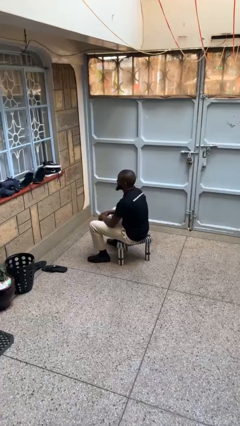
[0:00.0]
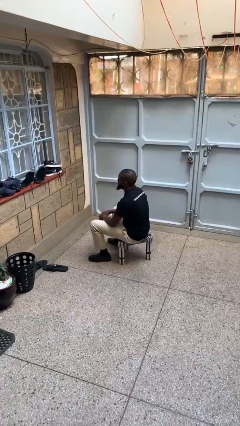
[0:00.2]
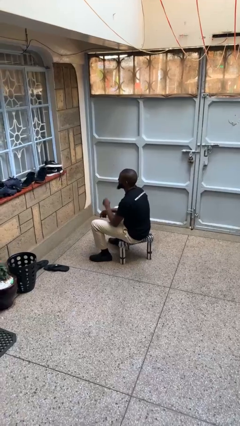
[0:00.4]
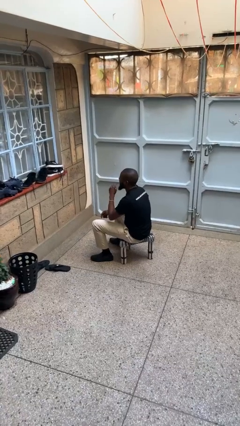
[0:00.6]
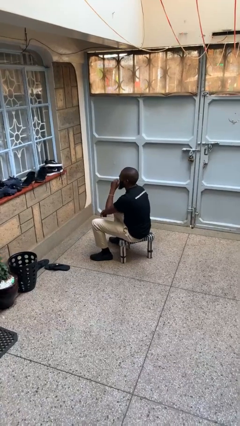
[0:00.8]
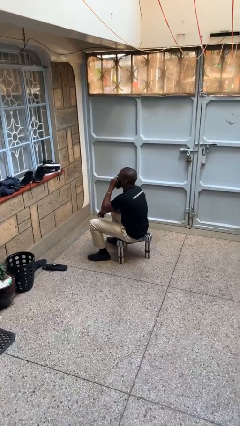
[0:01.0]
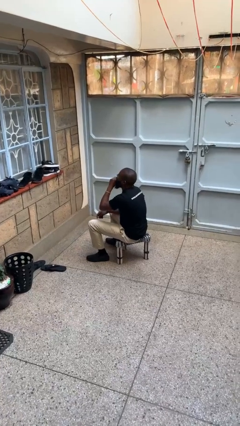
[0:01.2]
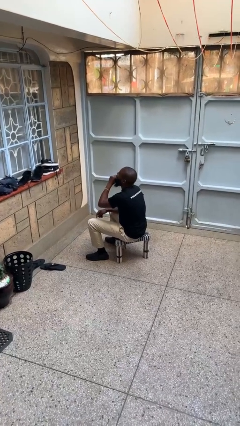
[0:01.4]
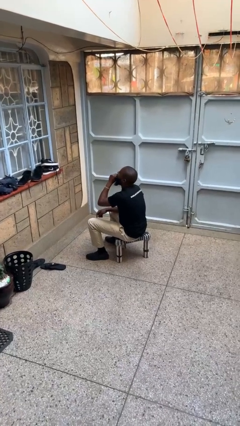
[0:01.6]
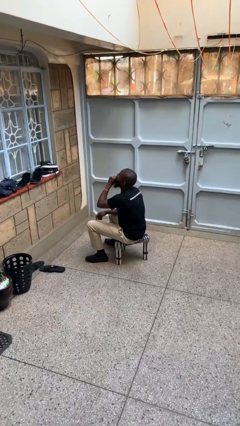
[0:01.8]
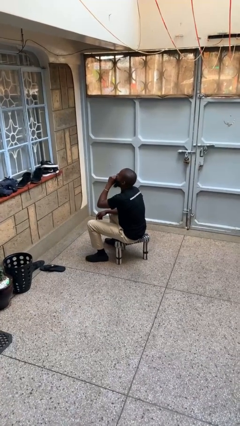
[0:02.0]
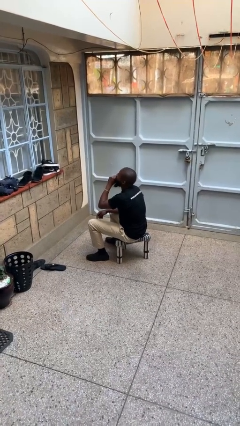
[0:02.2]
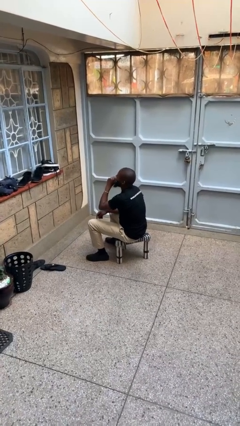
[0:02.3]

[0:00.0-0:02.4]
person yawns

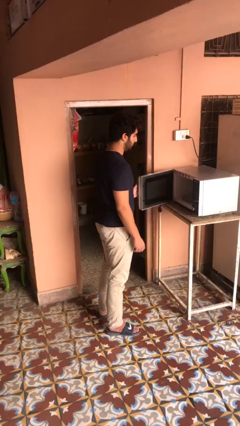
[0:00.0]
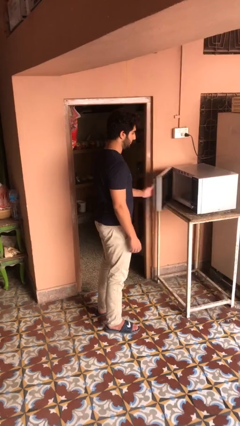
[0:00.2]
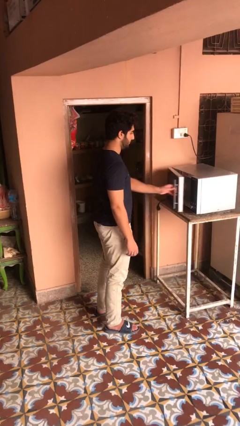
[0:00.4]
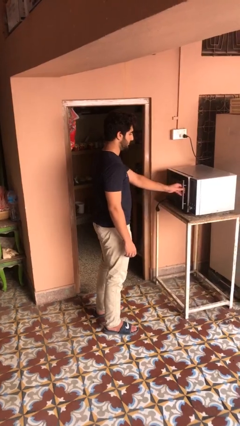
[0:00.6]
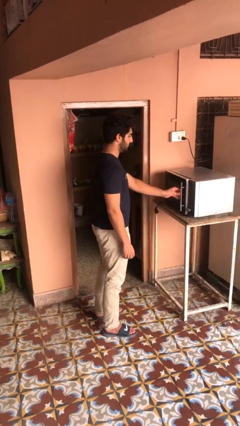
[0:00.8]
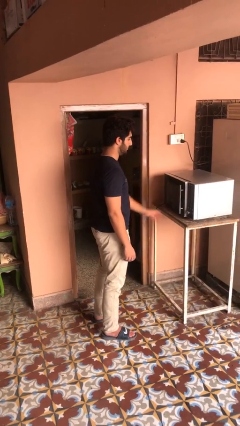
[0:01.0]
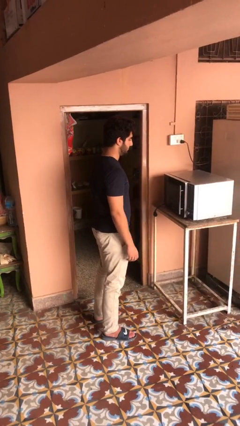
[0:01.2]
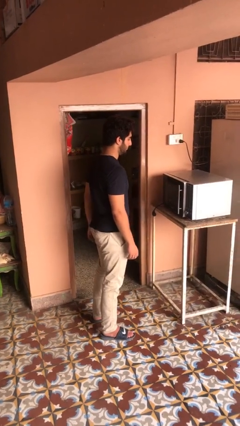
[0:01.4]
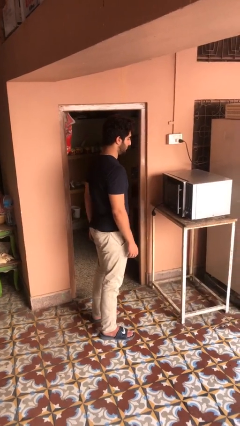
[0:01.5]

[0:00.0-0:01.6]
person closes microwave

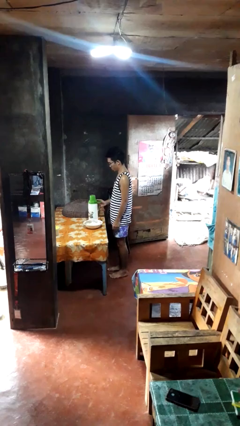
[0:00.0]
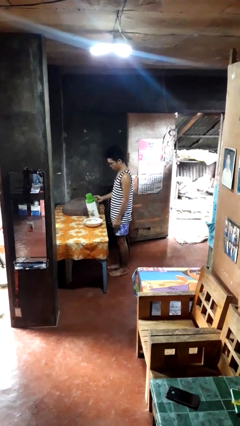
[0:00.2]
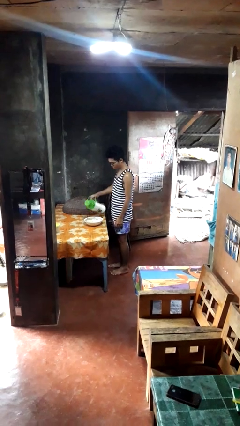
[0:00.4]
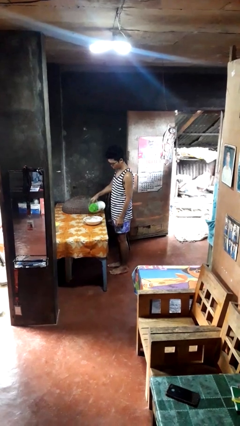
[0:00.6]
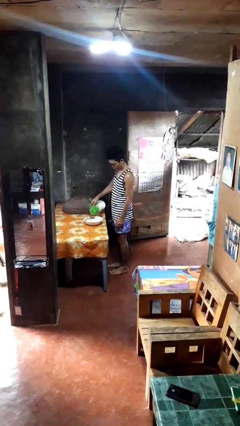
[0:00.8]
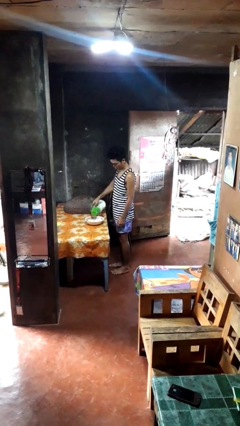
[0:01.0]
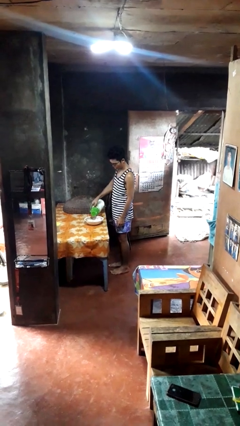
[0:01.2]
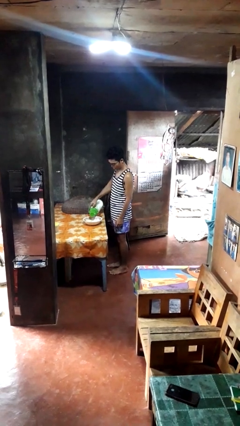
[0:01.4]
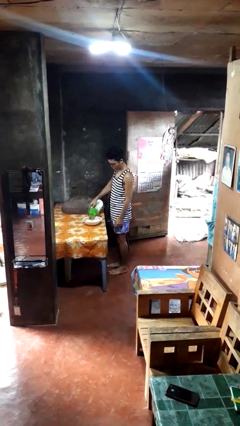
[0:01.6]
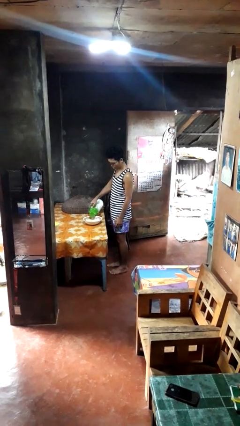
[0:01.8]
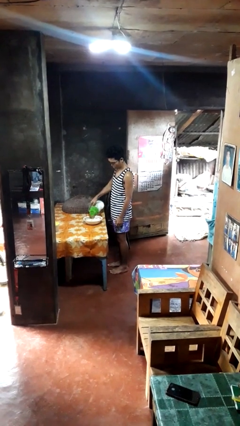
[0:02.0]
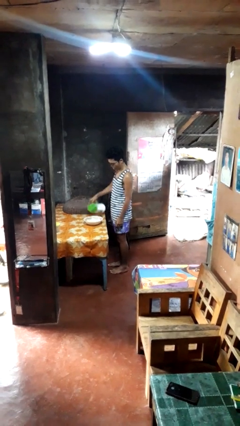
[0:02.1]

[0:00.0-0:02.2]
person pours into bowl

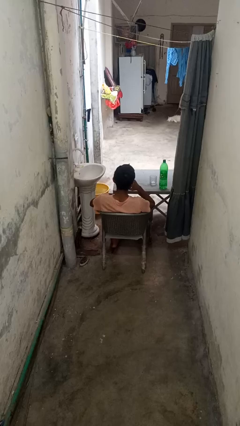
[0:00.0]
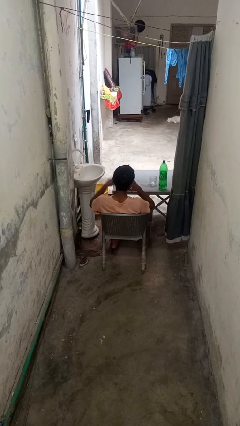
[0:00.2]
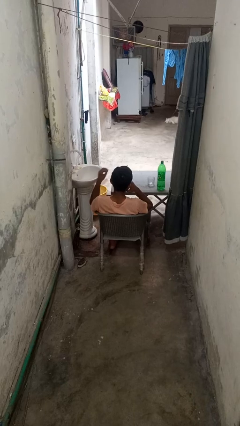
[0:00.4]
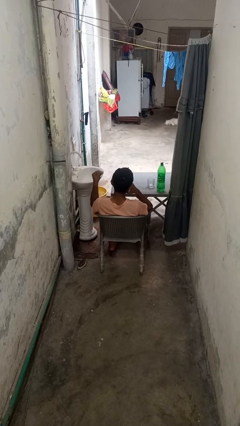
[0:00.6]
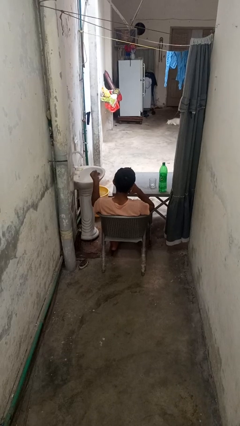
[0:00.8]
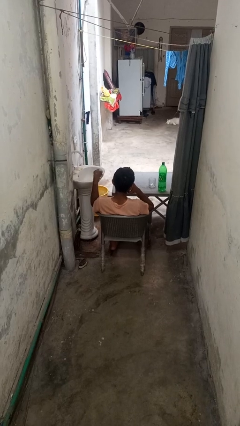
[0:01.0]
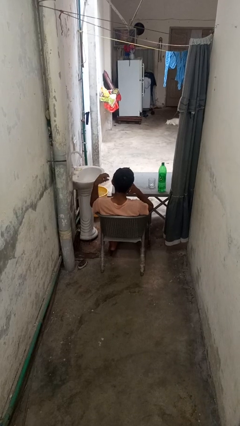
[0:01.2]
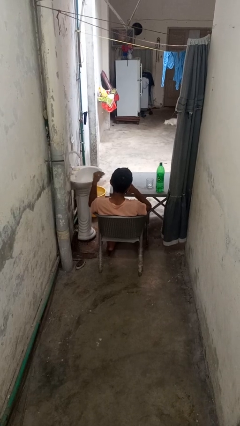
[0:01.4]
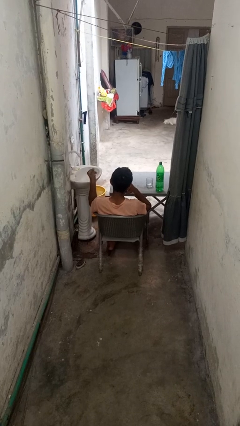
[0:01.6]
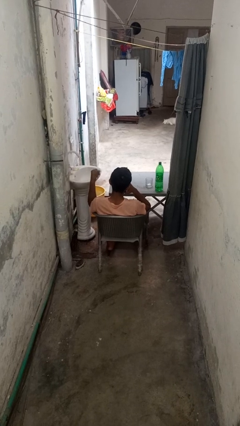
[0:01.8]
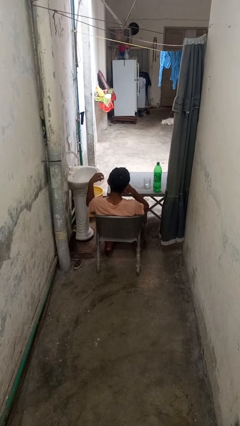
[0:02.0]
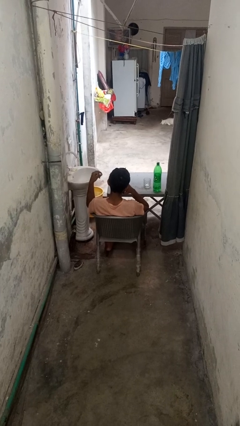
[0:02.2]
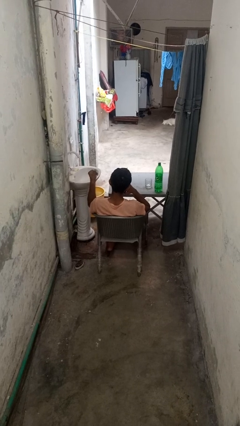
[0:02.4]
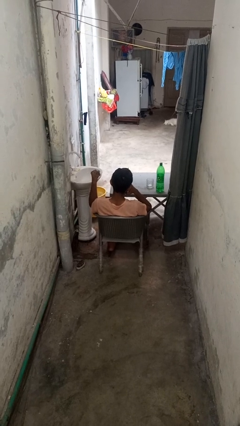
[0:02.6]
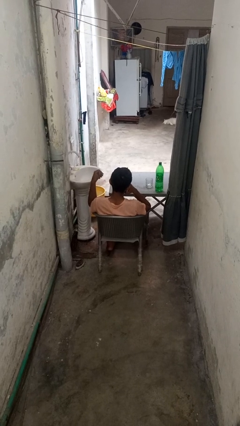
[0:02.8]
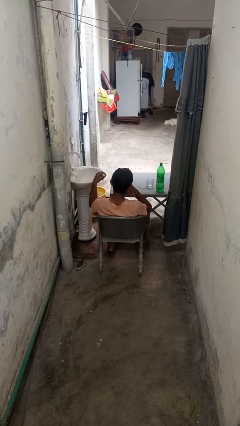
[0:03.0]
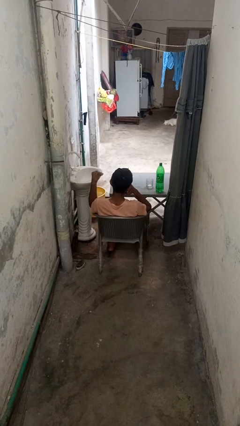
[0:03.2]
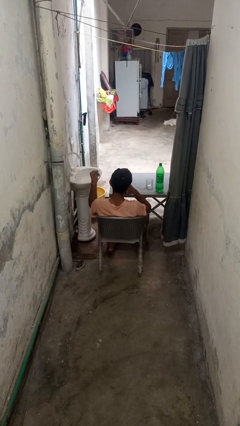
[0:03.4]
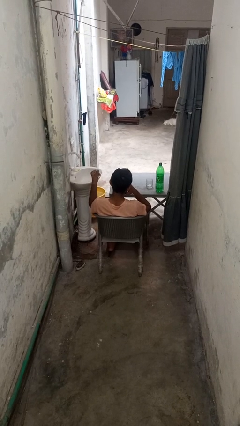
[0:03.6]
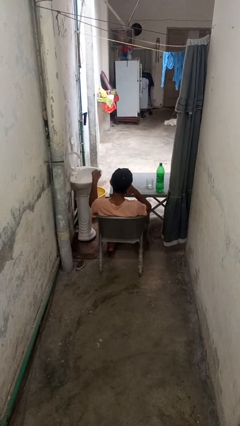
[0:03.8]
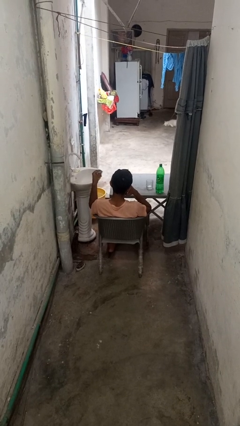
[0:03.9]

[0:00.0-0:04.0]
person snaps fingers

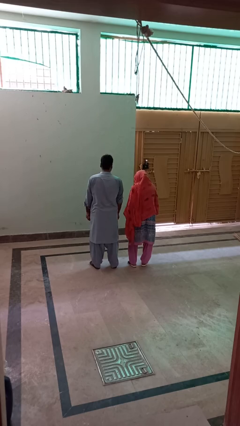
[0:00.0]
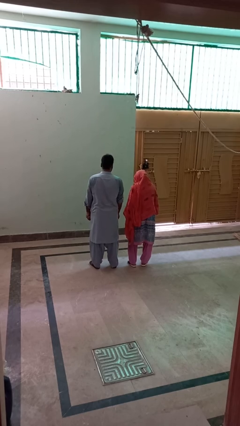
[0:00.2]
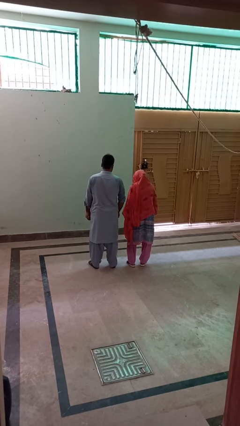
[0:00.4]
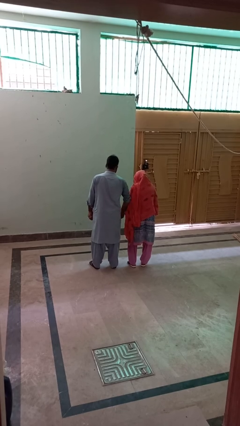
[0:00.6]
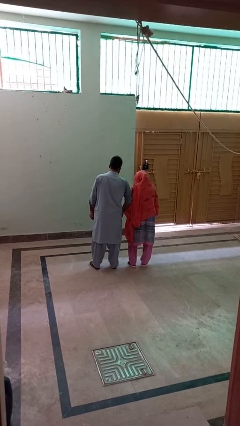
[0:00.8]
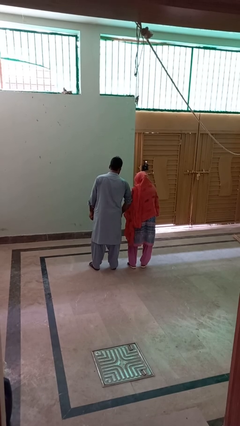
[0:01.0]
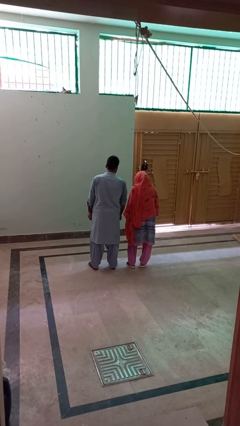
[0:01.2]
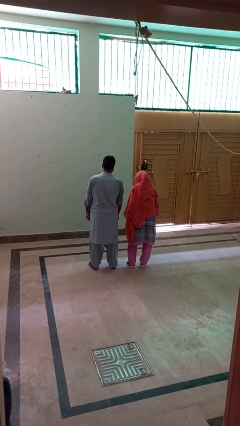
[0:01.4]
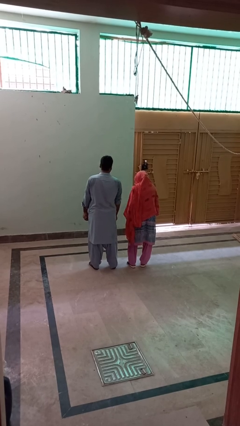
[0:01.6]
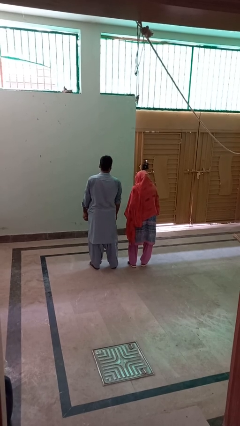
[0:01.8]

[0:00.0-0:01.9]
person nudges person with elbow

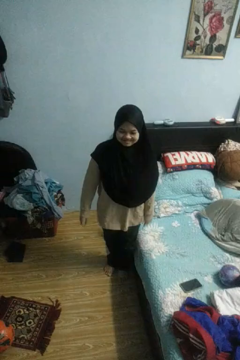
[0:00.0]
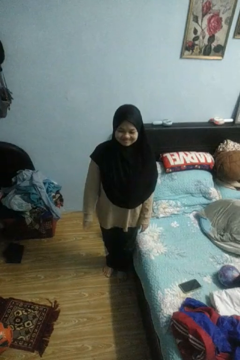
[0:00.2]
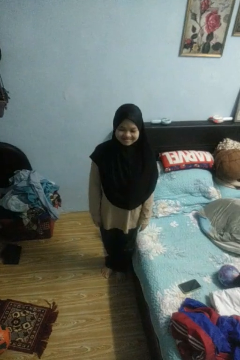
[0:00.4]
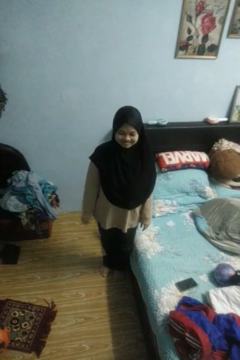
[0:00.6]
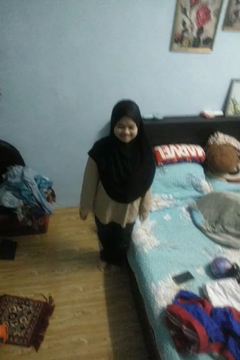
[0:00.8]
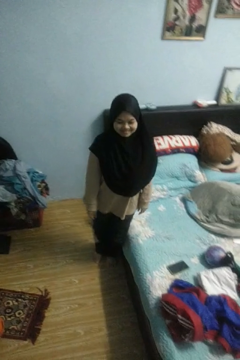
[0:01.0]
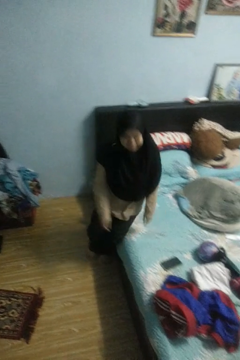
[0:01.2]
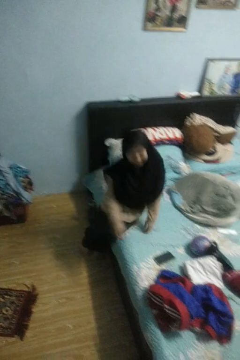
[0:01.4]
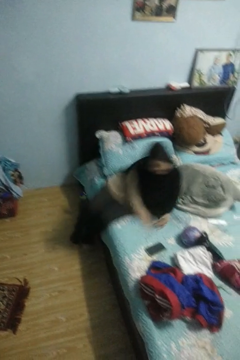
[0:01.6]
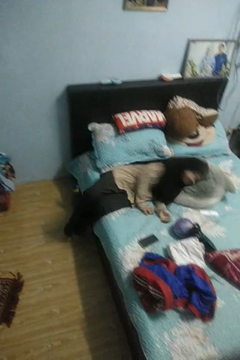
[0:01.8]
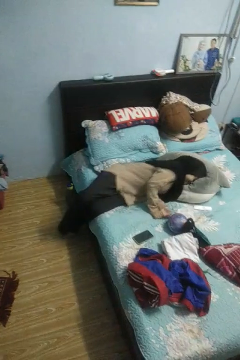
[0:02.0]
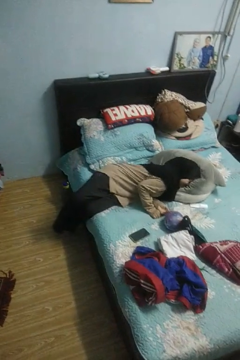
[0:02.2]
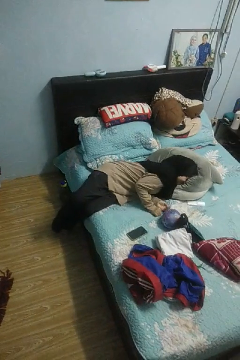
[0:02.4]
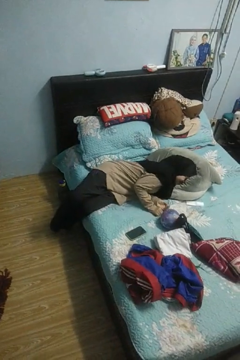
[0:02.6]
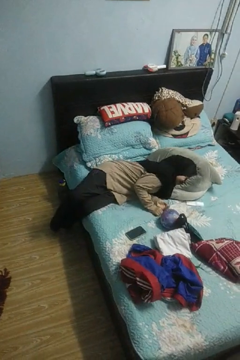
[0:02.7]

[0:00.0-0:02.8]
person lies down on bed

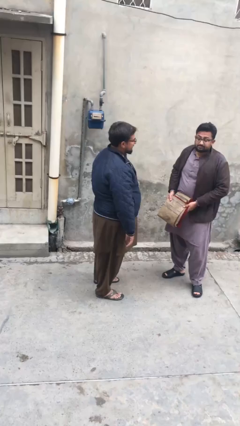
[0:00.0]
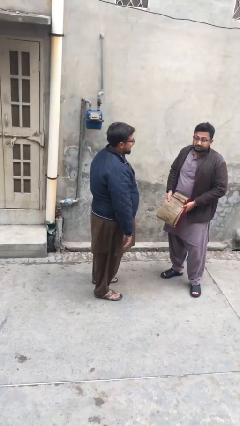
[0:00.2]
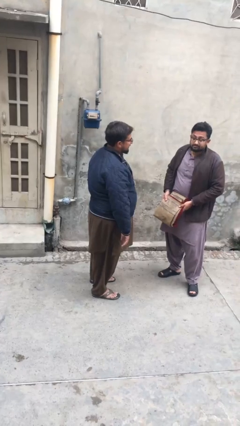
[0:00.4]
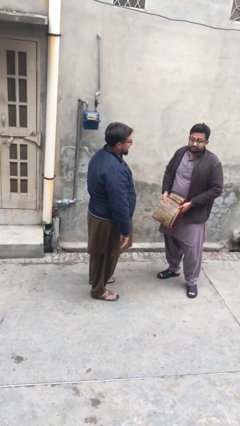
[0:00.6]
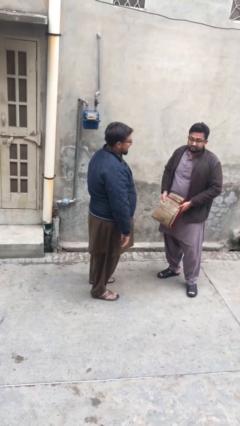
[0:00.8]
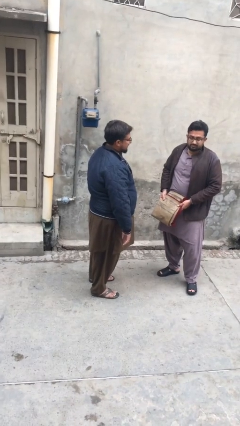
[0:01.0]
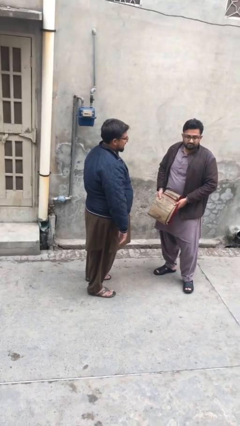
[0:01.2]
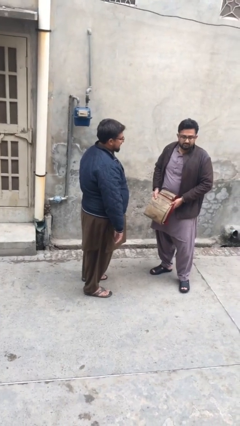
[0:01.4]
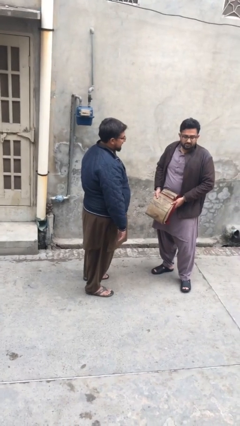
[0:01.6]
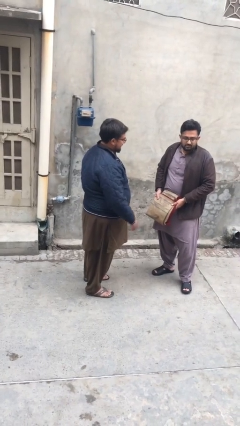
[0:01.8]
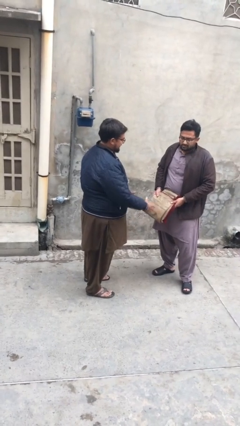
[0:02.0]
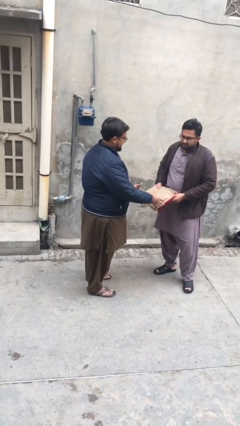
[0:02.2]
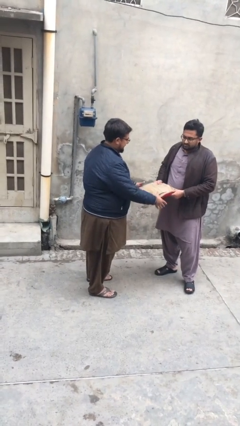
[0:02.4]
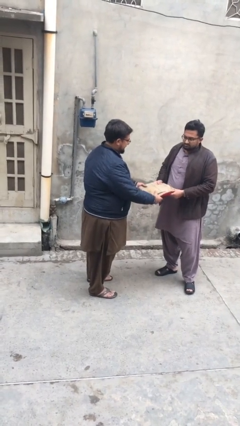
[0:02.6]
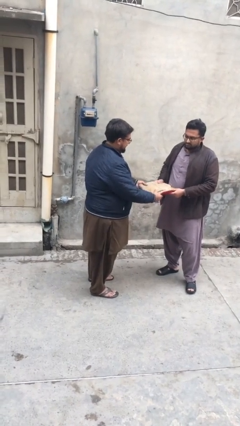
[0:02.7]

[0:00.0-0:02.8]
person transfers object to person
